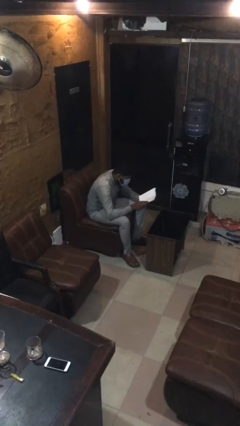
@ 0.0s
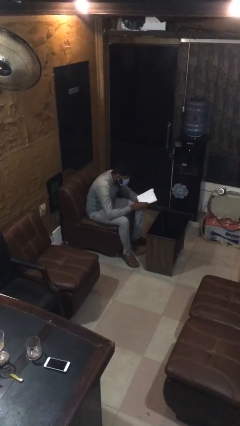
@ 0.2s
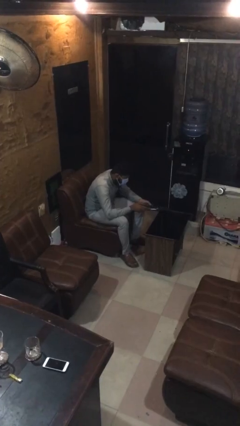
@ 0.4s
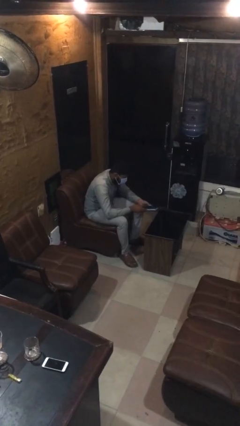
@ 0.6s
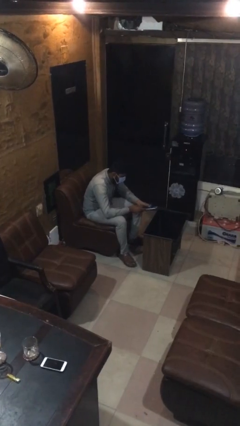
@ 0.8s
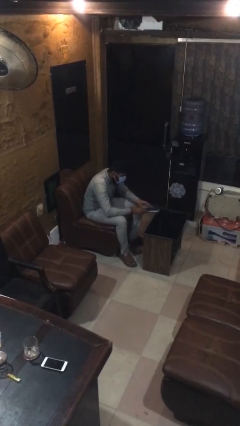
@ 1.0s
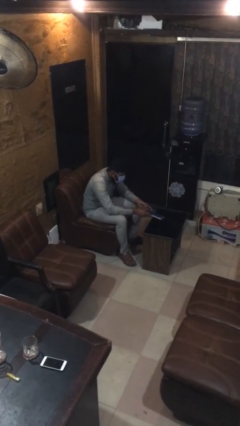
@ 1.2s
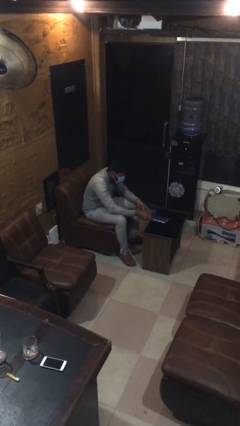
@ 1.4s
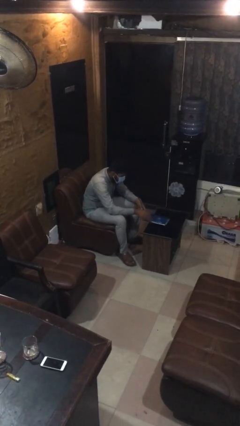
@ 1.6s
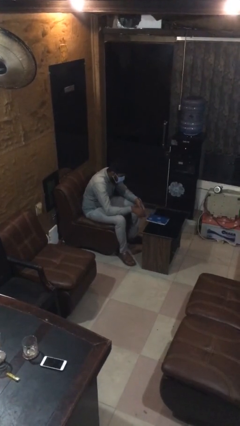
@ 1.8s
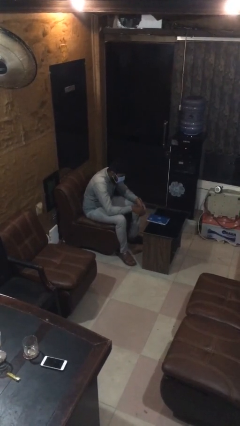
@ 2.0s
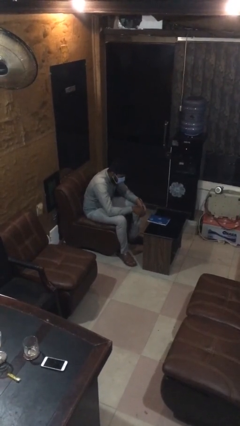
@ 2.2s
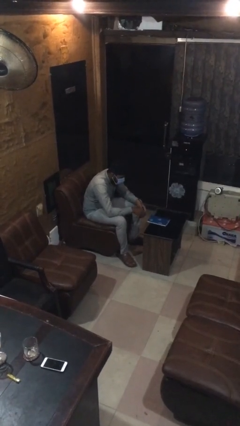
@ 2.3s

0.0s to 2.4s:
person puts down object on table

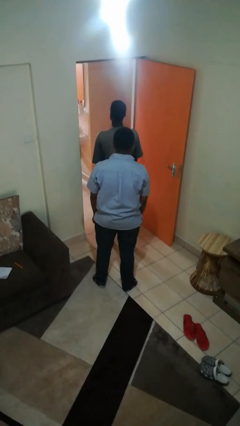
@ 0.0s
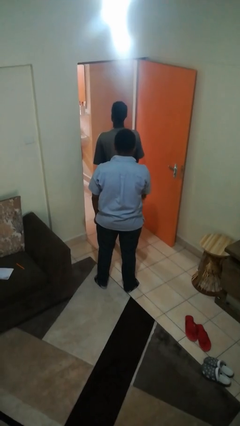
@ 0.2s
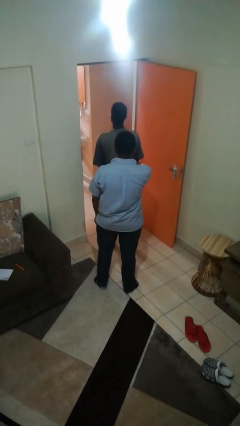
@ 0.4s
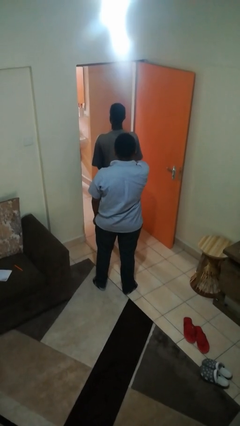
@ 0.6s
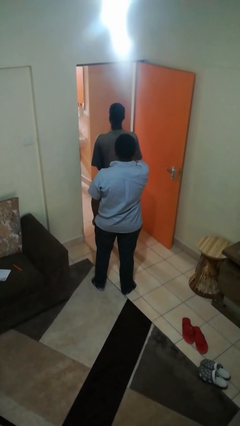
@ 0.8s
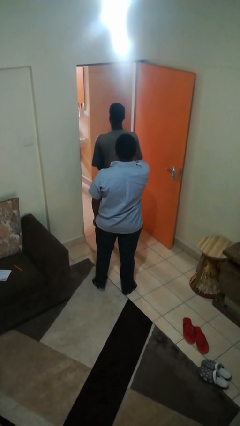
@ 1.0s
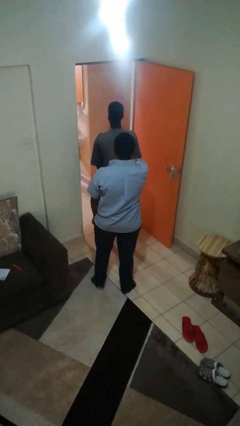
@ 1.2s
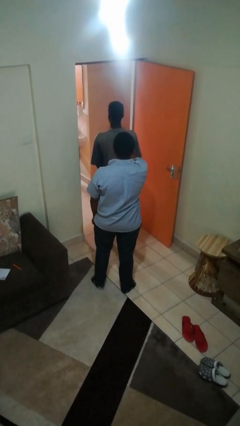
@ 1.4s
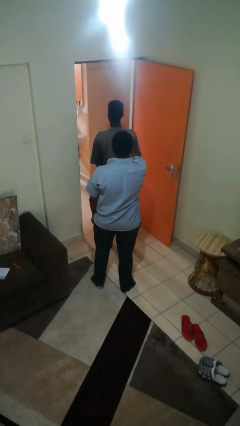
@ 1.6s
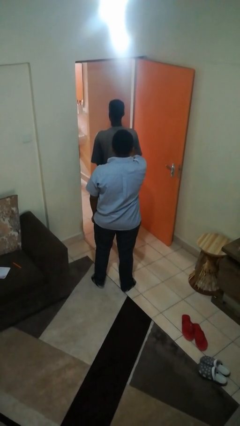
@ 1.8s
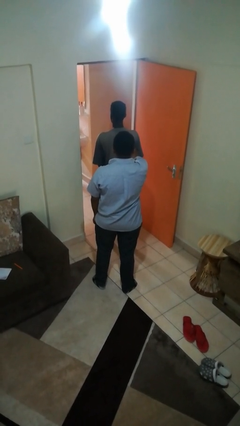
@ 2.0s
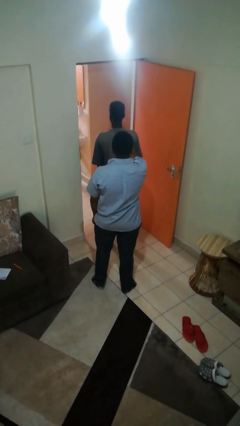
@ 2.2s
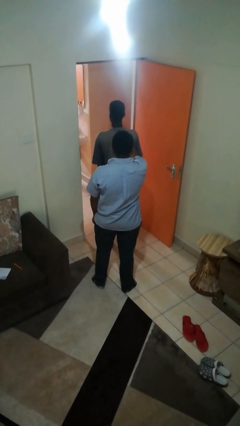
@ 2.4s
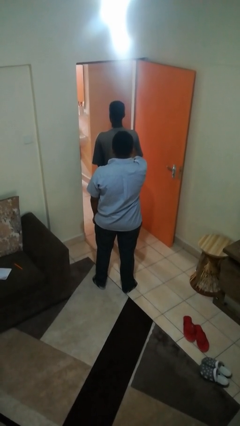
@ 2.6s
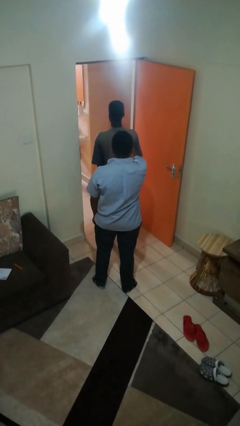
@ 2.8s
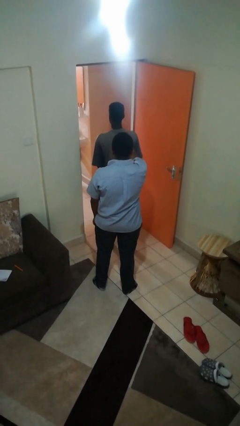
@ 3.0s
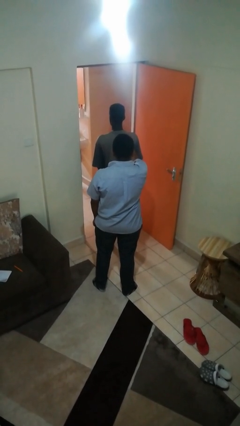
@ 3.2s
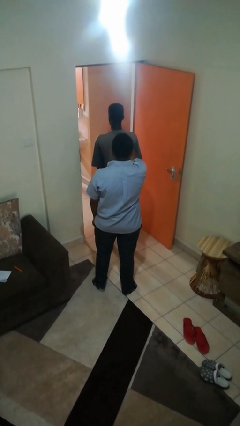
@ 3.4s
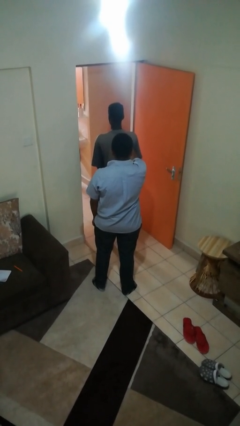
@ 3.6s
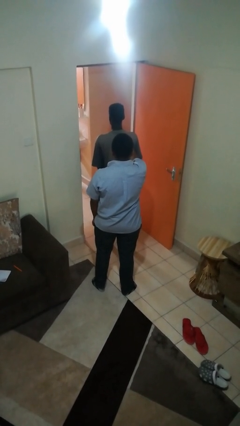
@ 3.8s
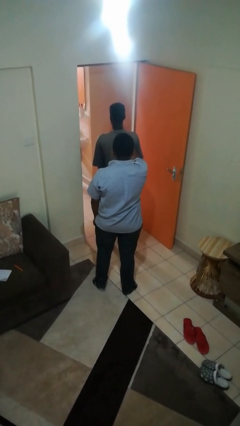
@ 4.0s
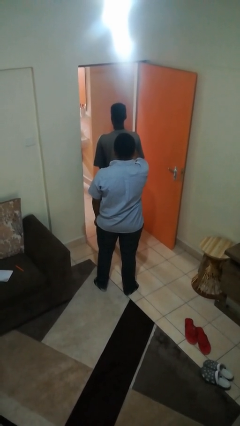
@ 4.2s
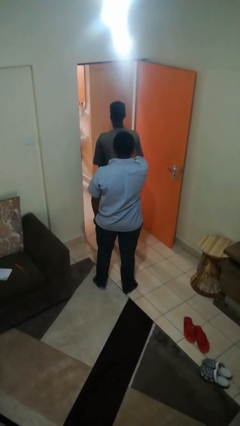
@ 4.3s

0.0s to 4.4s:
person touches back of person

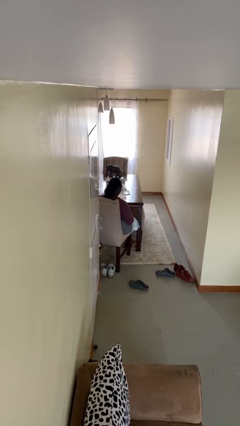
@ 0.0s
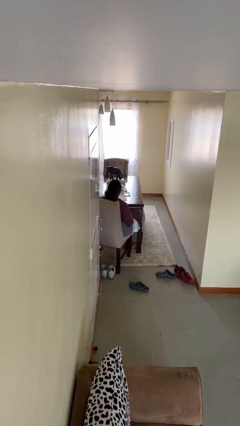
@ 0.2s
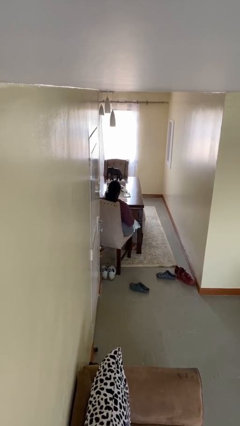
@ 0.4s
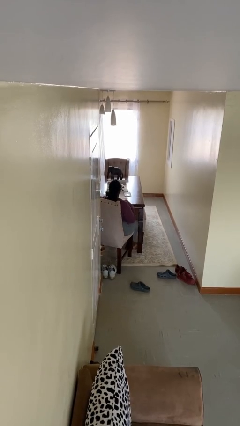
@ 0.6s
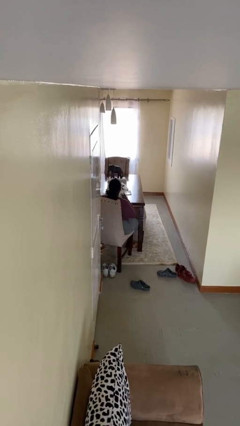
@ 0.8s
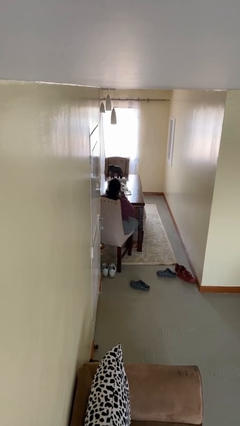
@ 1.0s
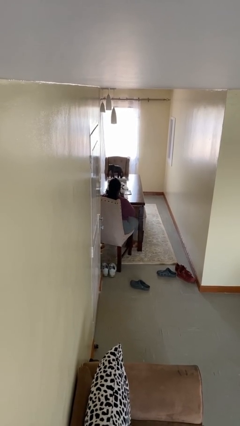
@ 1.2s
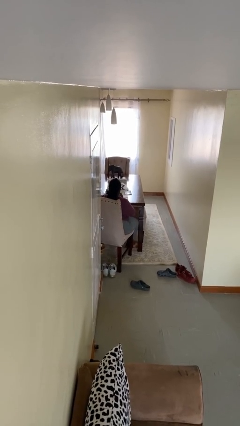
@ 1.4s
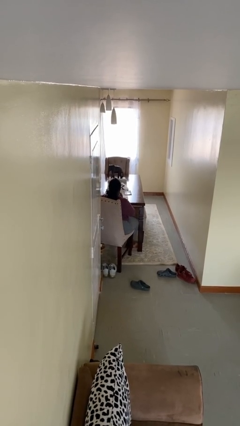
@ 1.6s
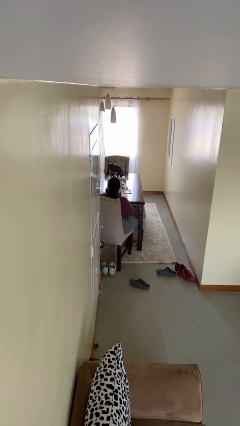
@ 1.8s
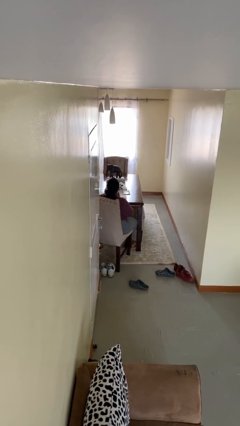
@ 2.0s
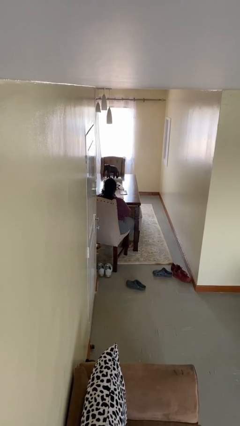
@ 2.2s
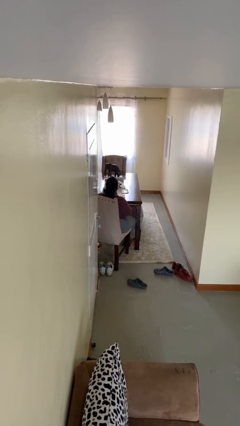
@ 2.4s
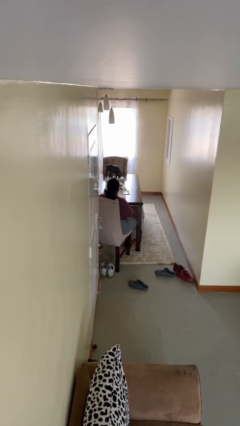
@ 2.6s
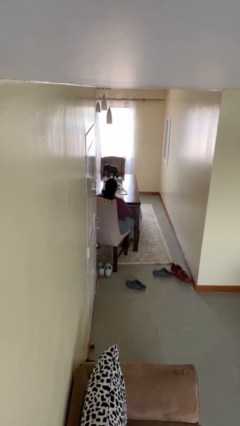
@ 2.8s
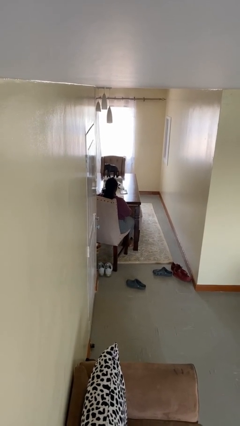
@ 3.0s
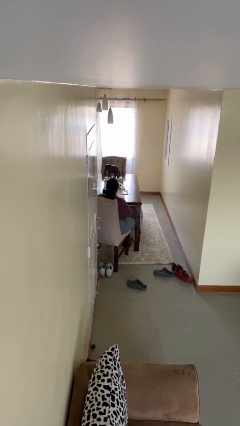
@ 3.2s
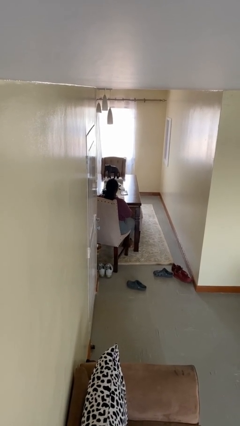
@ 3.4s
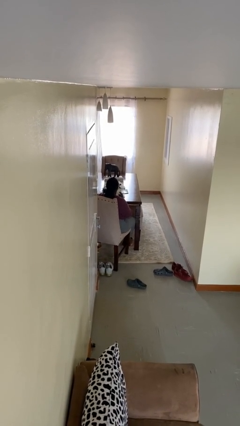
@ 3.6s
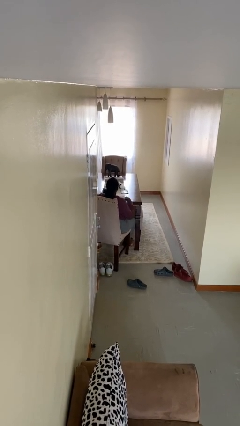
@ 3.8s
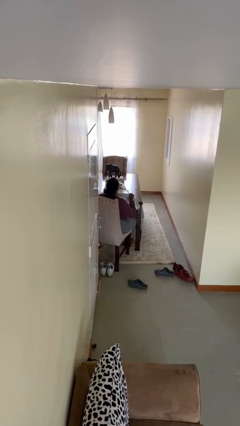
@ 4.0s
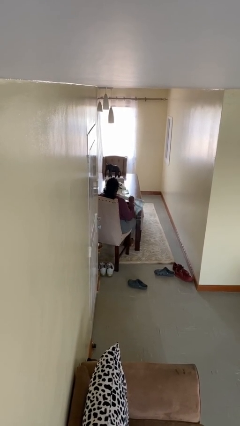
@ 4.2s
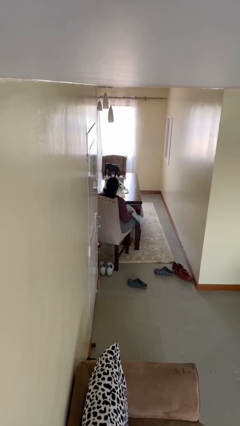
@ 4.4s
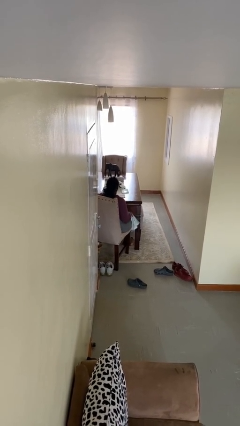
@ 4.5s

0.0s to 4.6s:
person wipes mouth with napkin

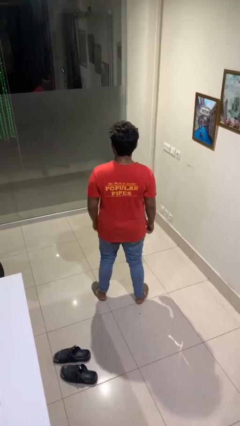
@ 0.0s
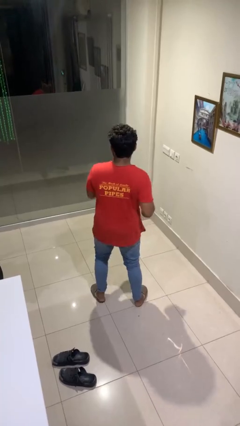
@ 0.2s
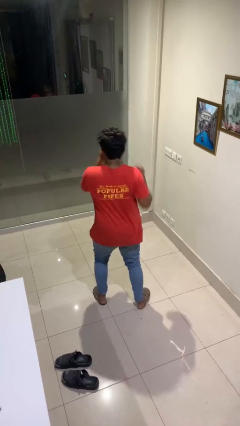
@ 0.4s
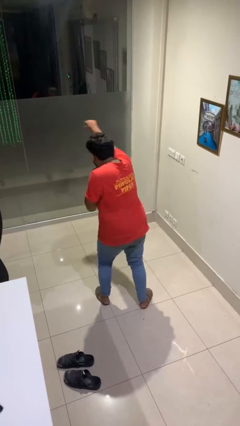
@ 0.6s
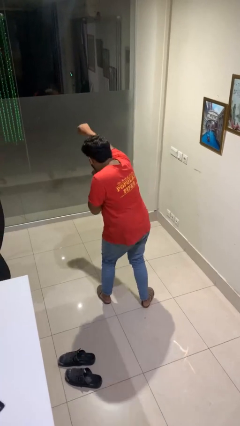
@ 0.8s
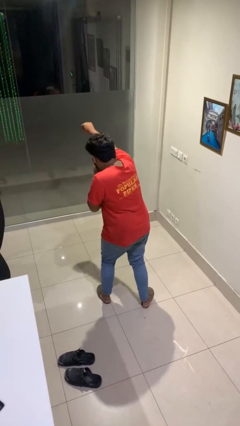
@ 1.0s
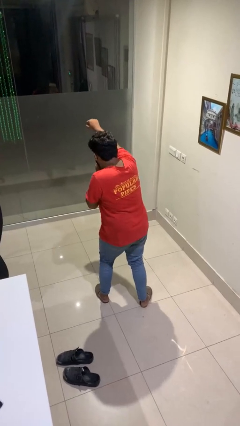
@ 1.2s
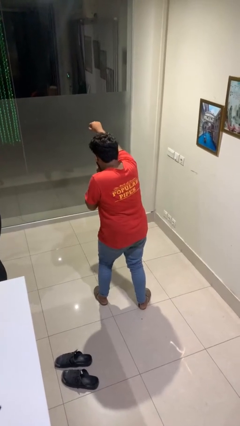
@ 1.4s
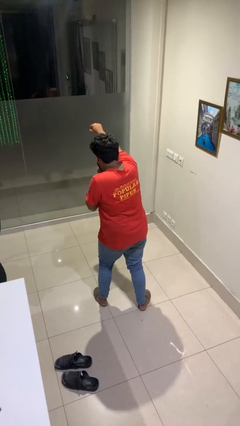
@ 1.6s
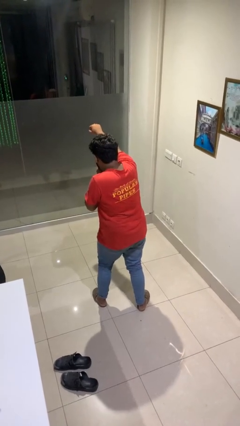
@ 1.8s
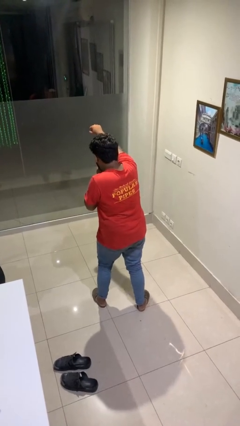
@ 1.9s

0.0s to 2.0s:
person punches

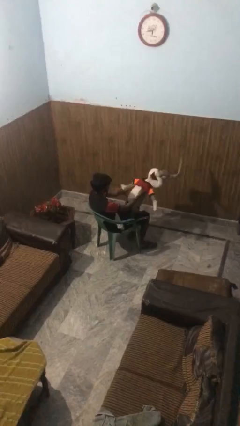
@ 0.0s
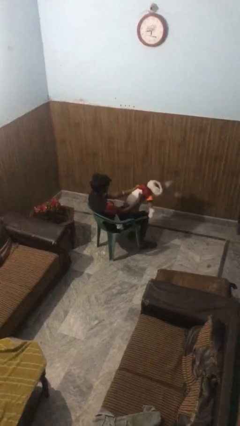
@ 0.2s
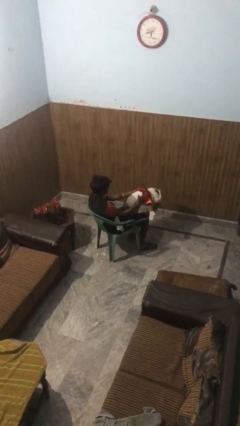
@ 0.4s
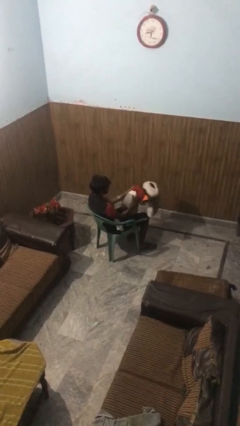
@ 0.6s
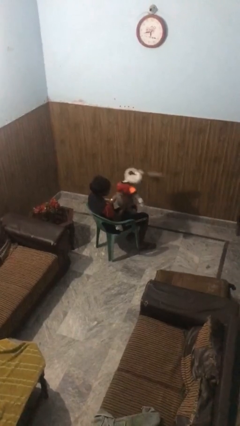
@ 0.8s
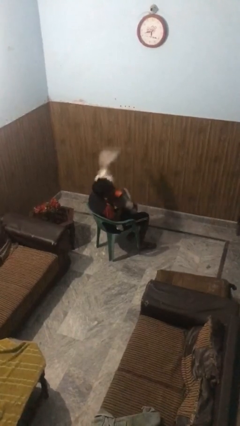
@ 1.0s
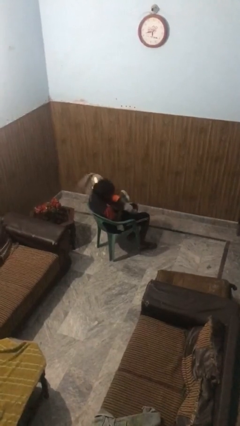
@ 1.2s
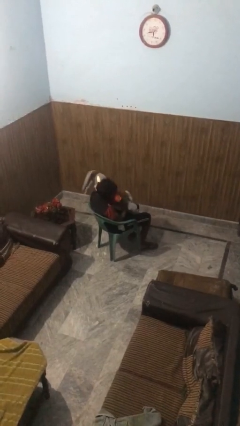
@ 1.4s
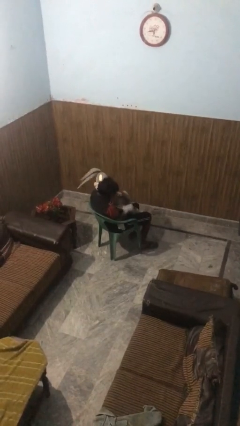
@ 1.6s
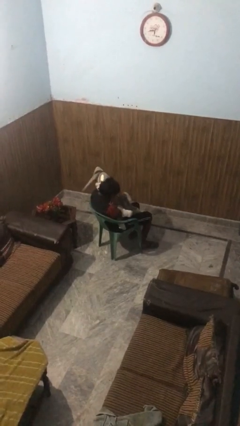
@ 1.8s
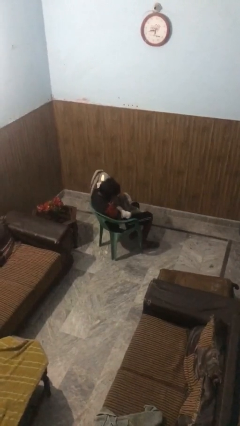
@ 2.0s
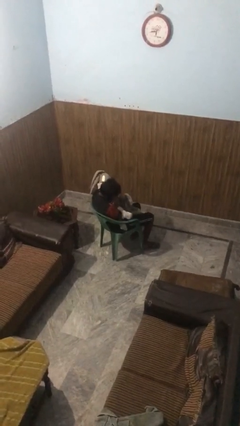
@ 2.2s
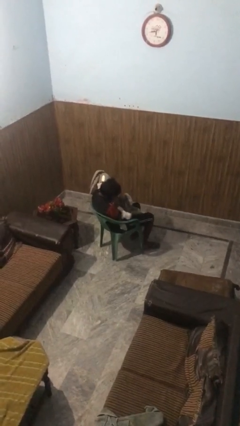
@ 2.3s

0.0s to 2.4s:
person hugs stuffed animal

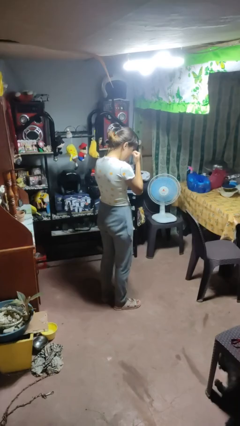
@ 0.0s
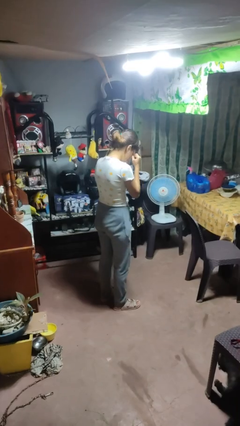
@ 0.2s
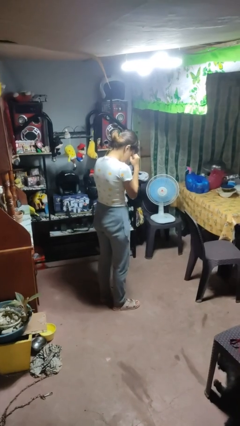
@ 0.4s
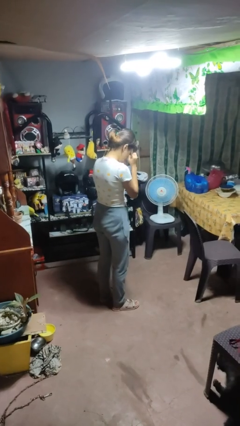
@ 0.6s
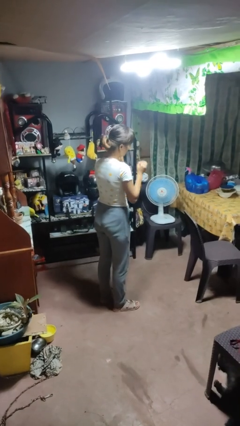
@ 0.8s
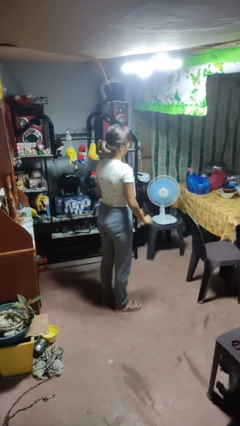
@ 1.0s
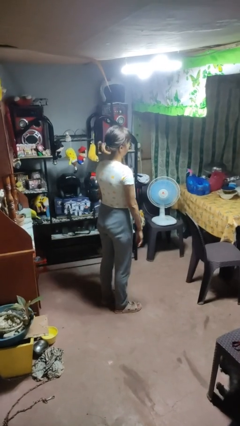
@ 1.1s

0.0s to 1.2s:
person rubs eyes

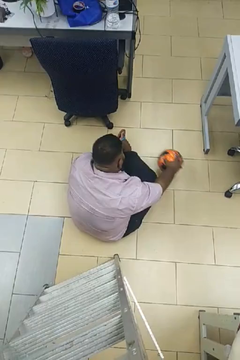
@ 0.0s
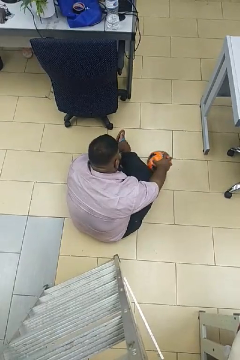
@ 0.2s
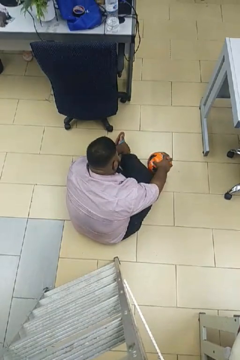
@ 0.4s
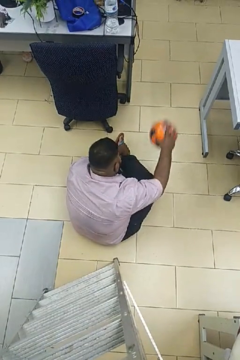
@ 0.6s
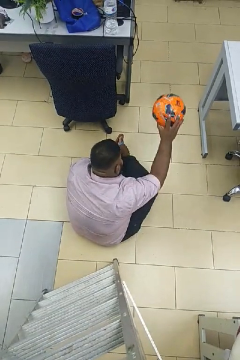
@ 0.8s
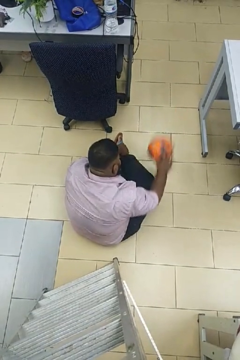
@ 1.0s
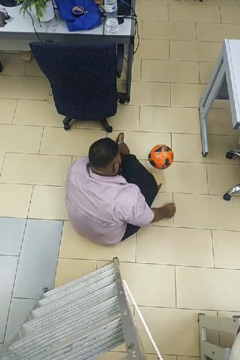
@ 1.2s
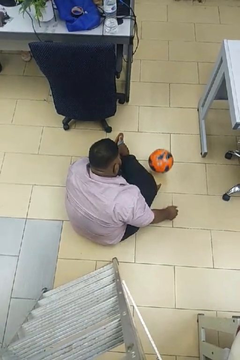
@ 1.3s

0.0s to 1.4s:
person bounces ball on floor
